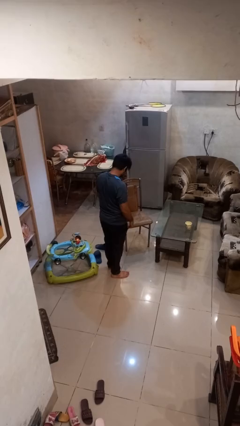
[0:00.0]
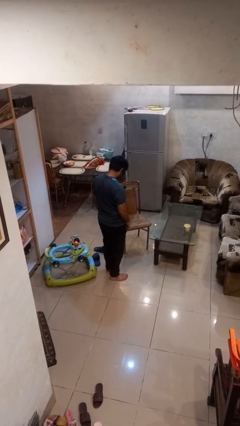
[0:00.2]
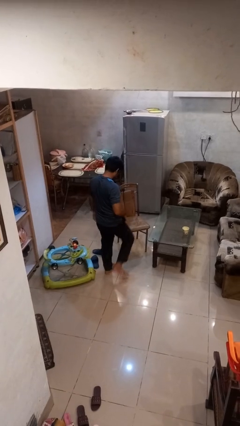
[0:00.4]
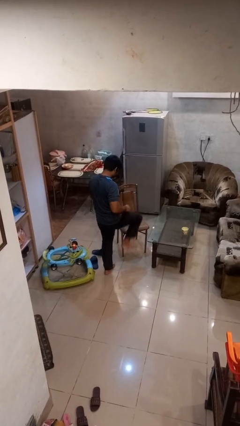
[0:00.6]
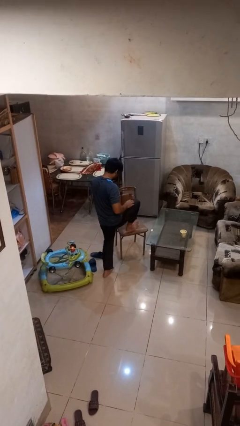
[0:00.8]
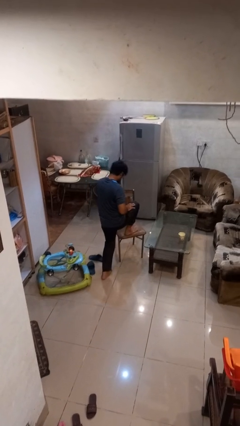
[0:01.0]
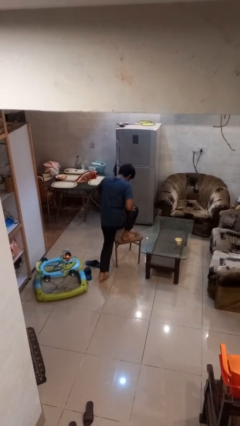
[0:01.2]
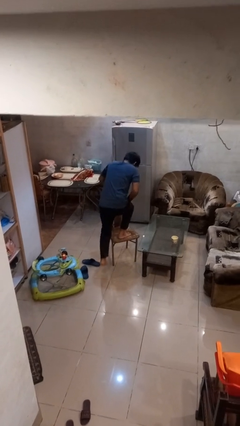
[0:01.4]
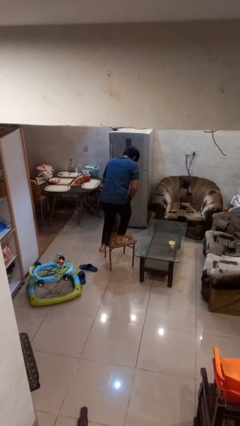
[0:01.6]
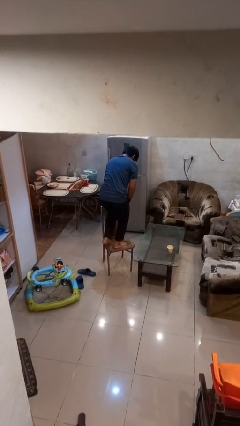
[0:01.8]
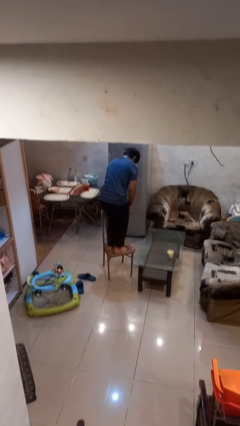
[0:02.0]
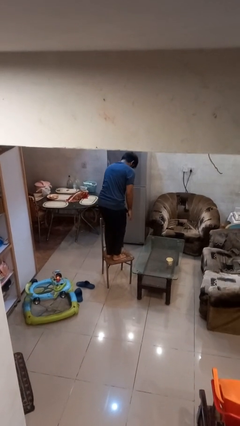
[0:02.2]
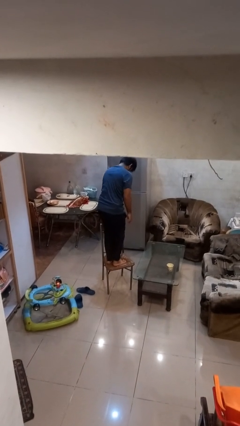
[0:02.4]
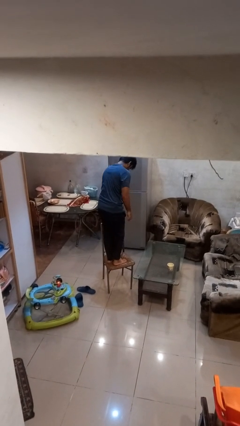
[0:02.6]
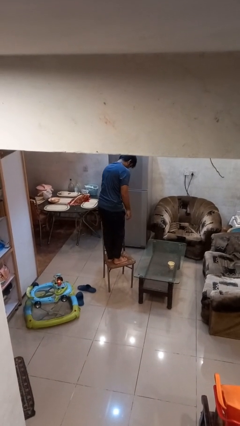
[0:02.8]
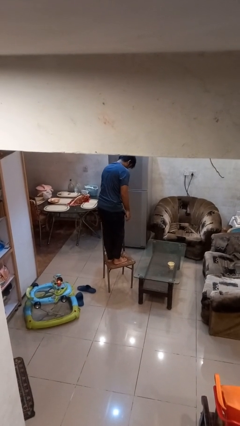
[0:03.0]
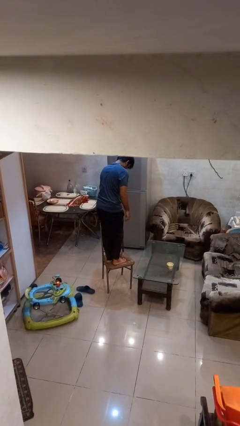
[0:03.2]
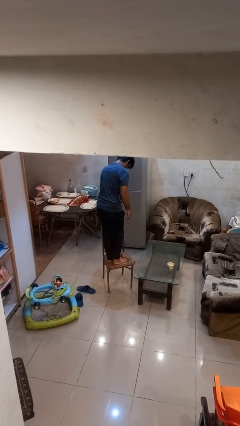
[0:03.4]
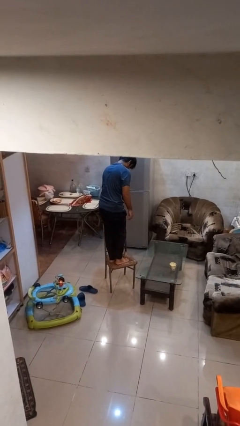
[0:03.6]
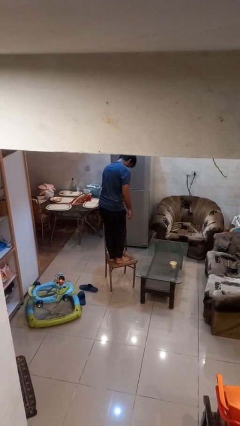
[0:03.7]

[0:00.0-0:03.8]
person climbs on chair

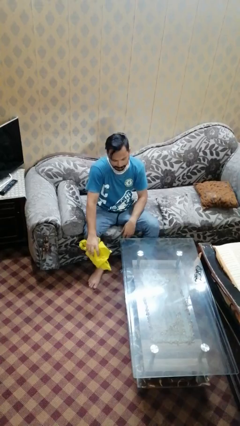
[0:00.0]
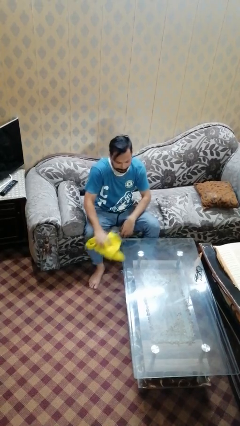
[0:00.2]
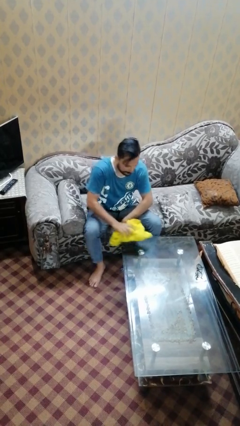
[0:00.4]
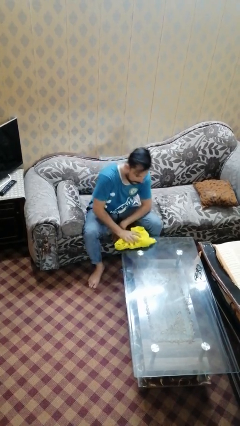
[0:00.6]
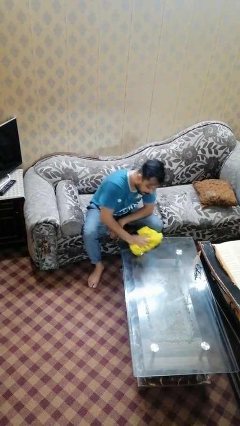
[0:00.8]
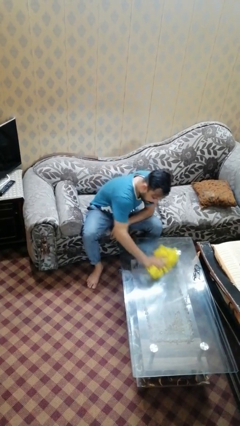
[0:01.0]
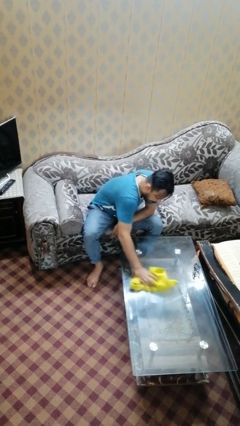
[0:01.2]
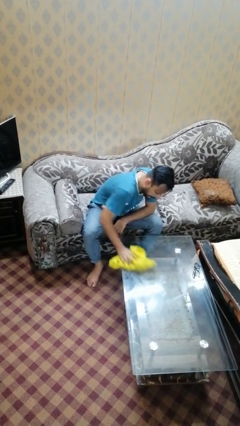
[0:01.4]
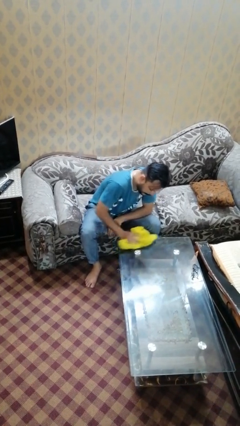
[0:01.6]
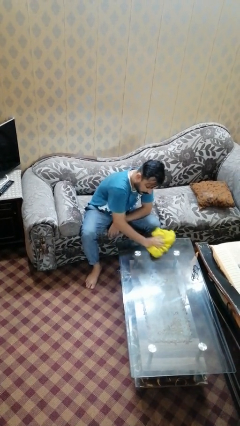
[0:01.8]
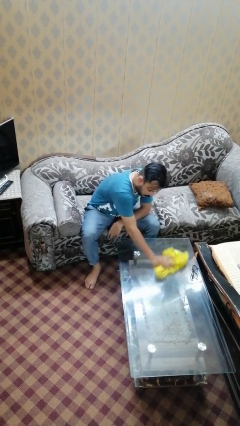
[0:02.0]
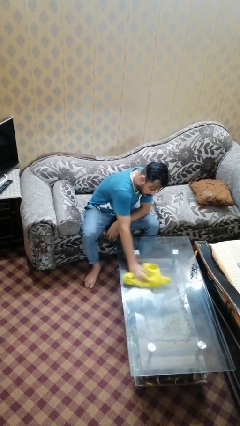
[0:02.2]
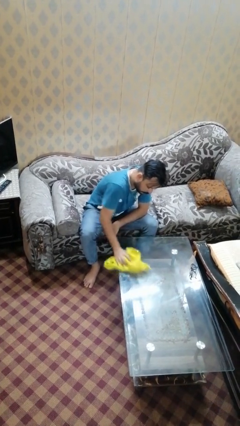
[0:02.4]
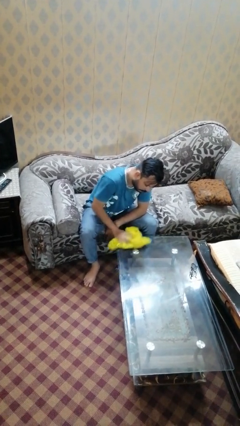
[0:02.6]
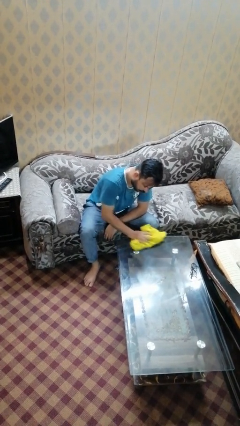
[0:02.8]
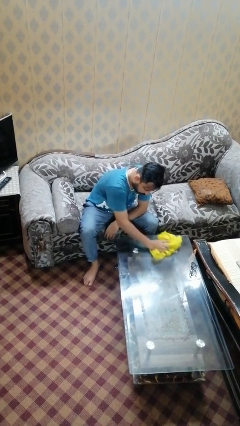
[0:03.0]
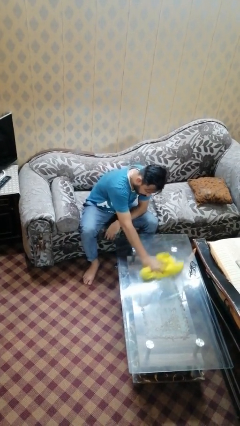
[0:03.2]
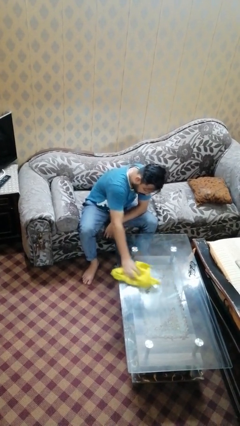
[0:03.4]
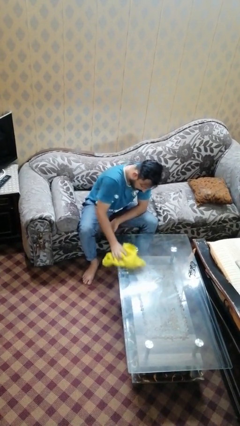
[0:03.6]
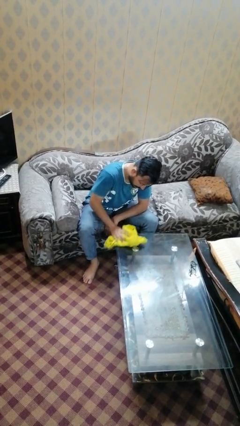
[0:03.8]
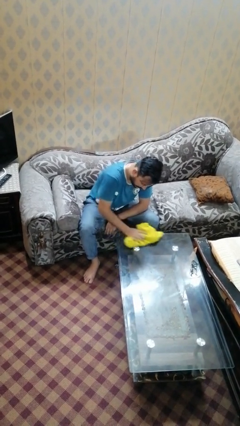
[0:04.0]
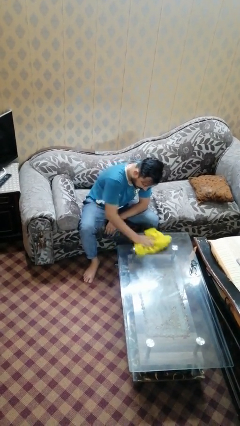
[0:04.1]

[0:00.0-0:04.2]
person cleans table with rag

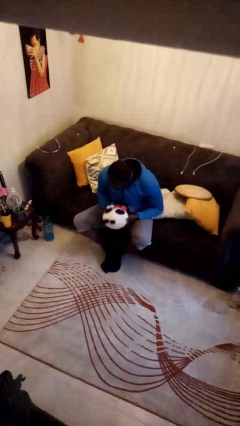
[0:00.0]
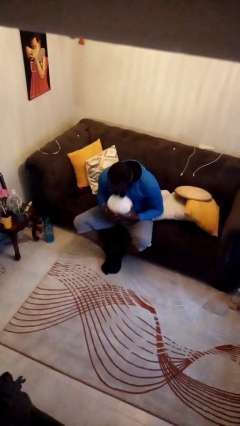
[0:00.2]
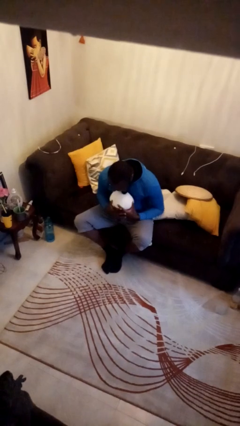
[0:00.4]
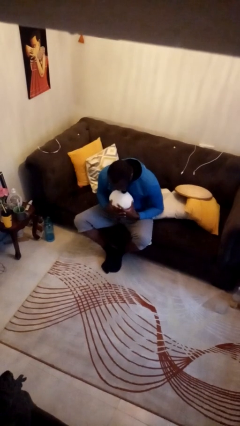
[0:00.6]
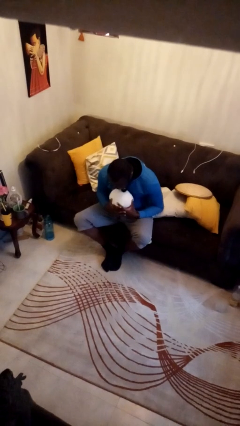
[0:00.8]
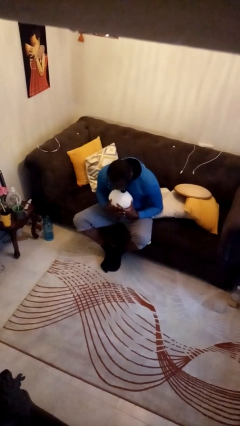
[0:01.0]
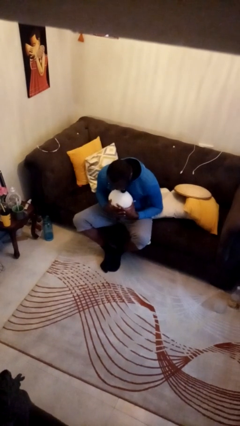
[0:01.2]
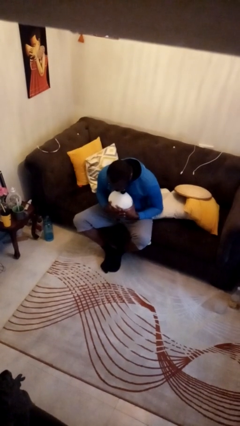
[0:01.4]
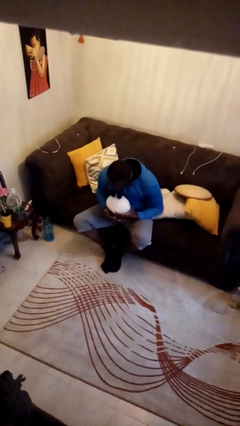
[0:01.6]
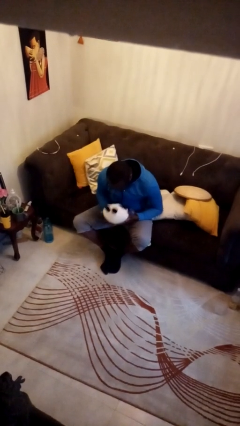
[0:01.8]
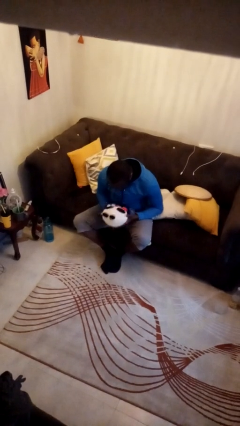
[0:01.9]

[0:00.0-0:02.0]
person hugs stuffed animal

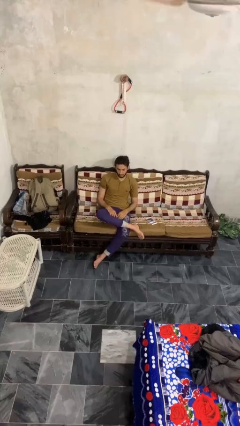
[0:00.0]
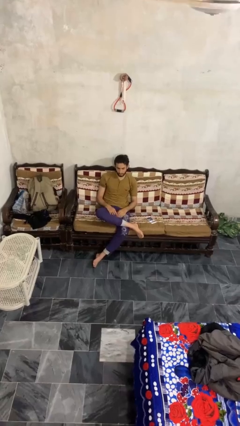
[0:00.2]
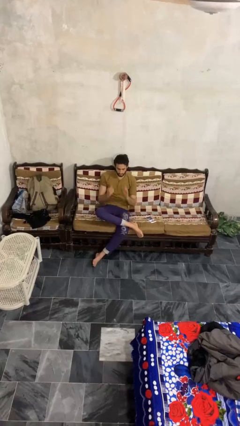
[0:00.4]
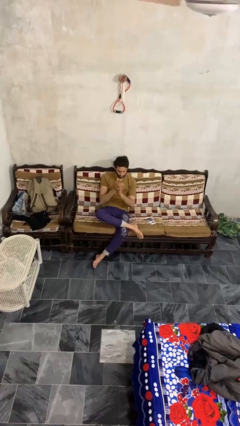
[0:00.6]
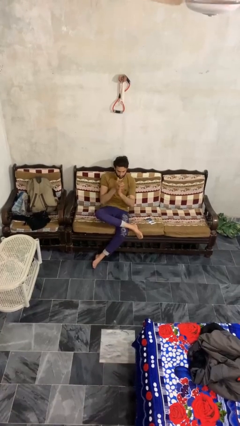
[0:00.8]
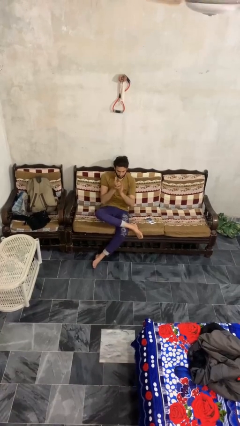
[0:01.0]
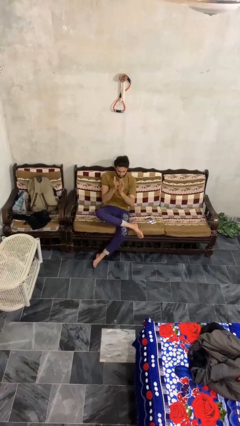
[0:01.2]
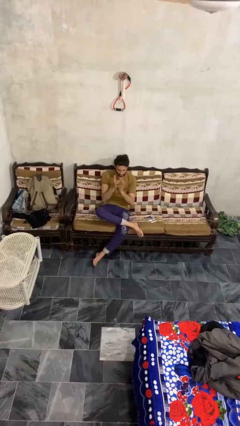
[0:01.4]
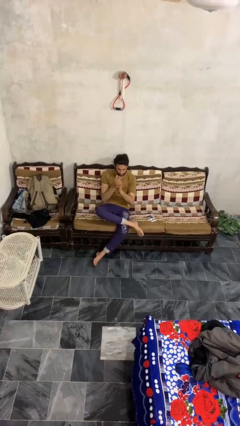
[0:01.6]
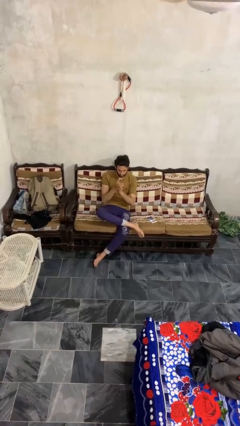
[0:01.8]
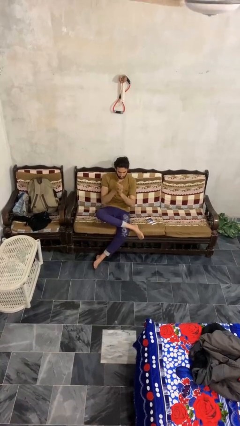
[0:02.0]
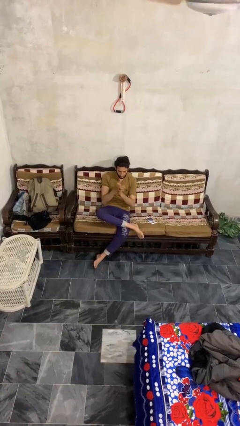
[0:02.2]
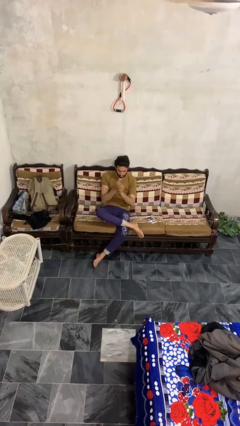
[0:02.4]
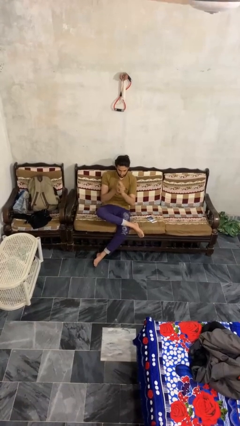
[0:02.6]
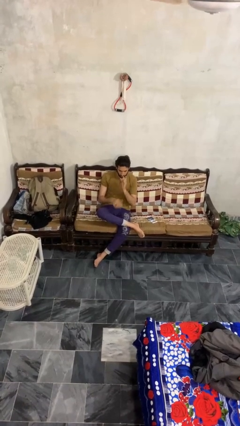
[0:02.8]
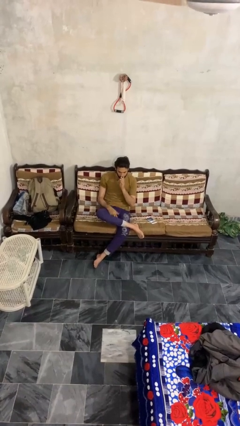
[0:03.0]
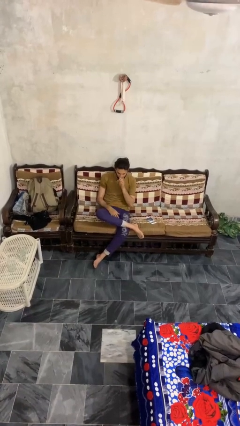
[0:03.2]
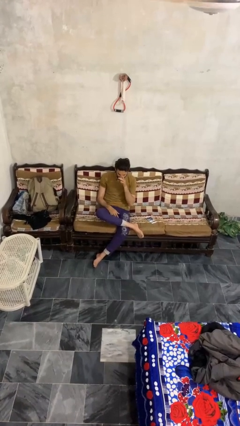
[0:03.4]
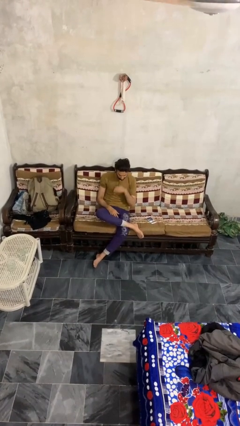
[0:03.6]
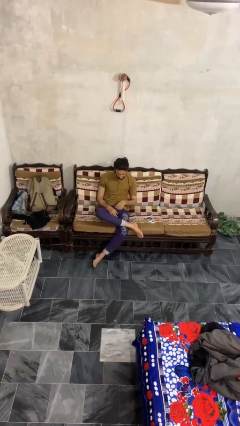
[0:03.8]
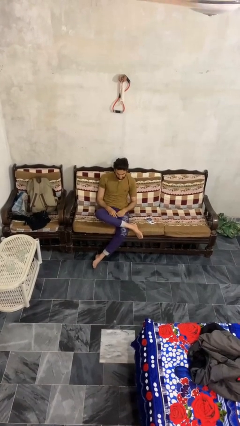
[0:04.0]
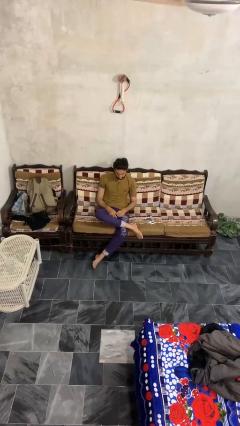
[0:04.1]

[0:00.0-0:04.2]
person claps hands

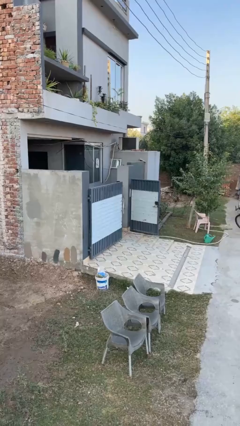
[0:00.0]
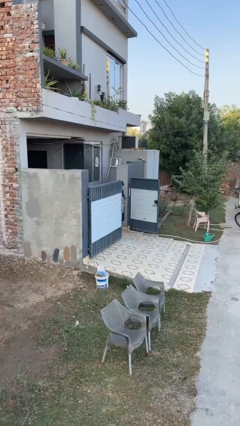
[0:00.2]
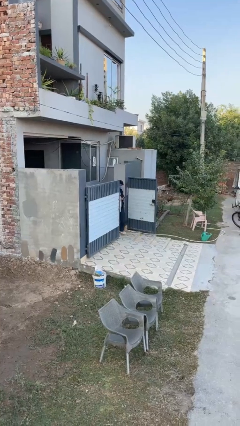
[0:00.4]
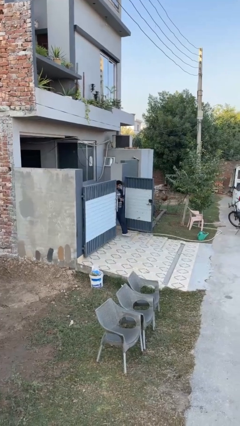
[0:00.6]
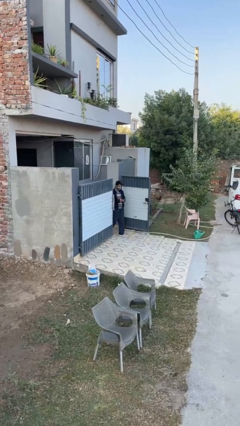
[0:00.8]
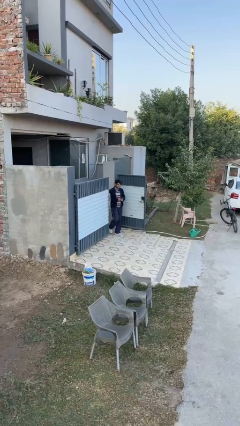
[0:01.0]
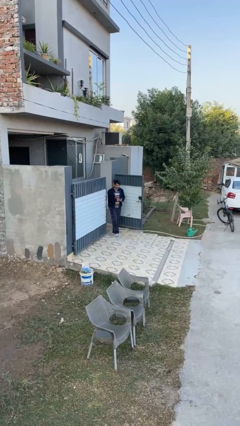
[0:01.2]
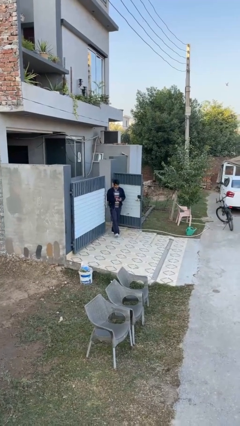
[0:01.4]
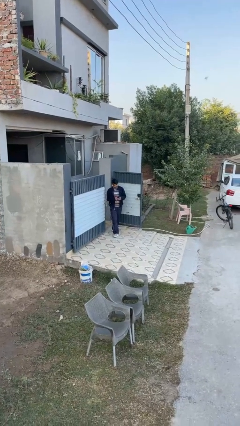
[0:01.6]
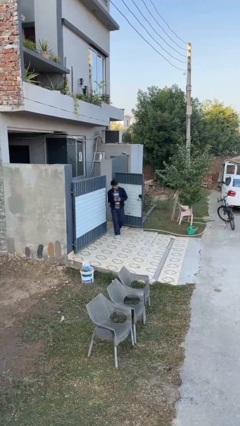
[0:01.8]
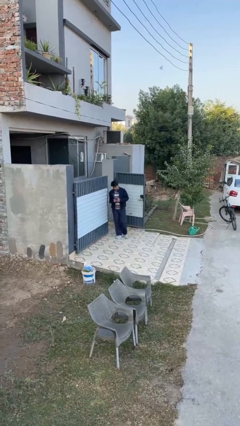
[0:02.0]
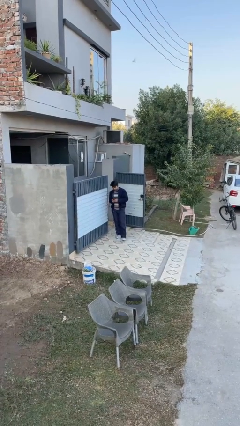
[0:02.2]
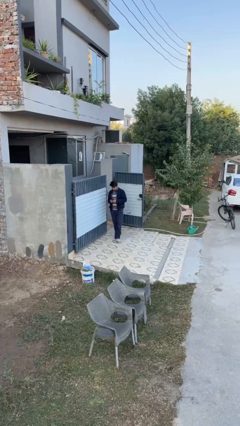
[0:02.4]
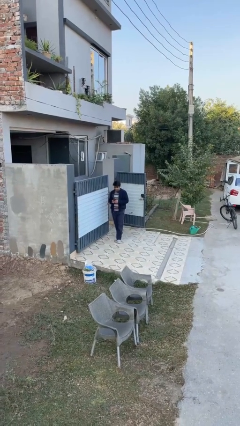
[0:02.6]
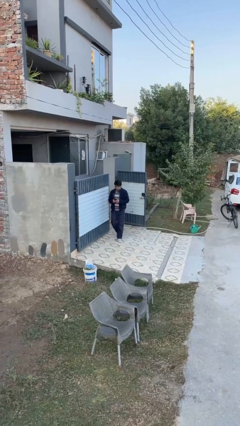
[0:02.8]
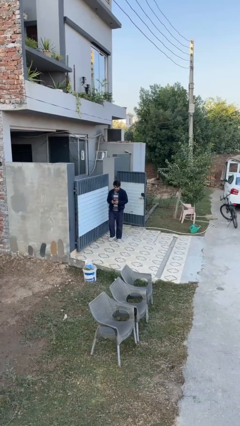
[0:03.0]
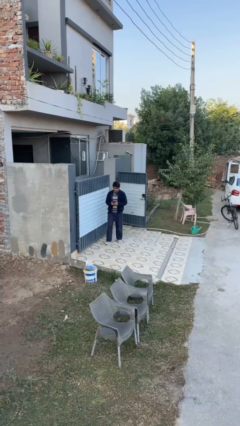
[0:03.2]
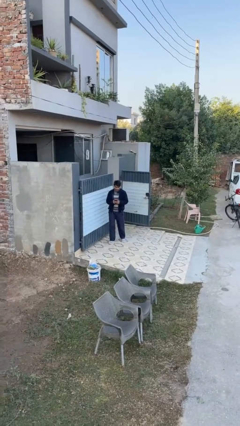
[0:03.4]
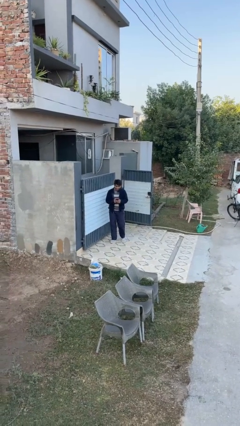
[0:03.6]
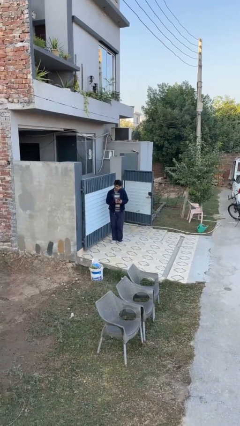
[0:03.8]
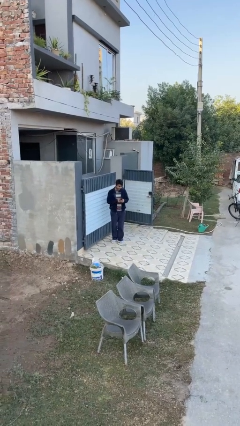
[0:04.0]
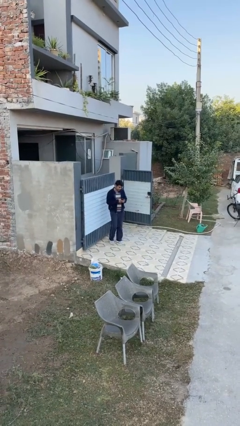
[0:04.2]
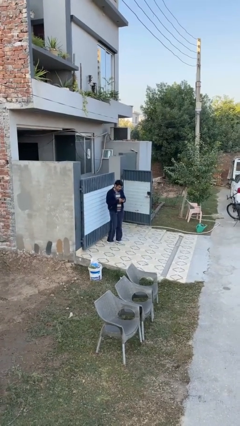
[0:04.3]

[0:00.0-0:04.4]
person enters scene through structure
